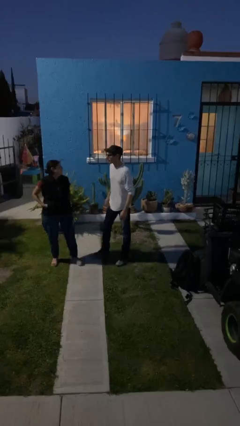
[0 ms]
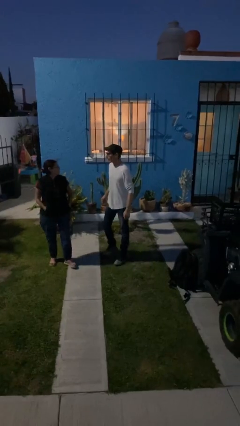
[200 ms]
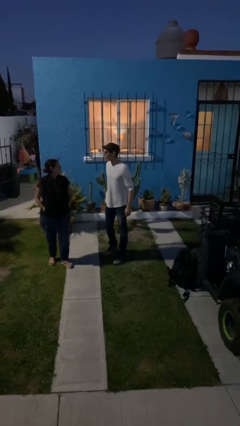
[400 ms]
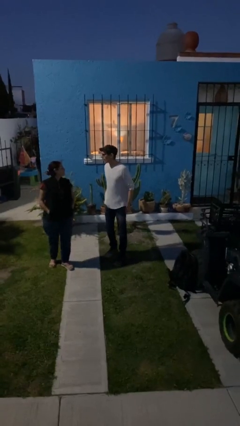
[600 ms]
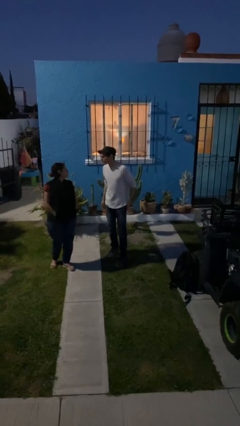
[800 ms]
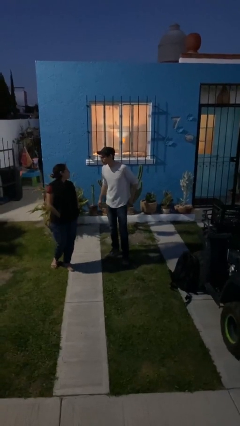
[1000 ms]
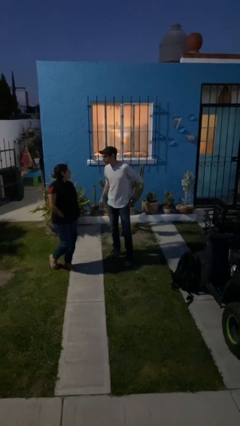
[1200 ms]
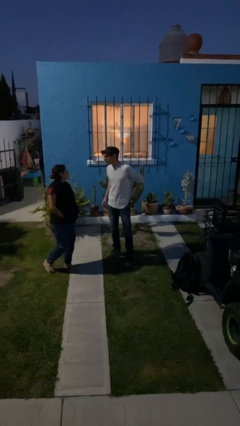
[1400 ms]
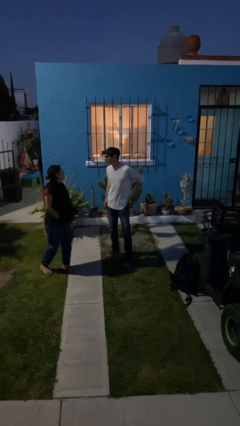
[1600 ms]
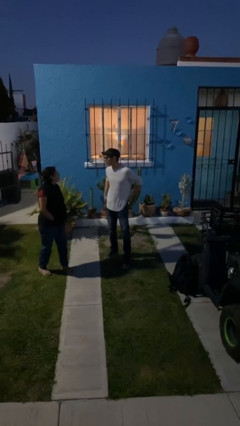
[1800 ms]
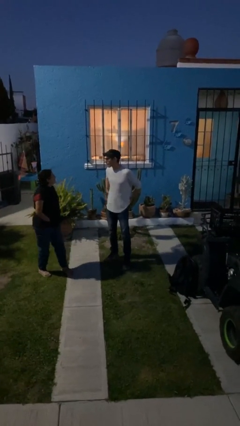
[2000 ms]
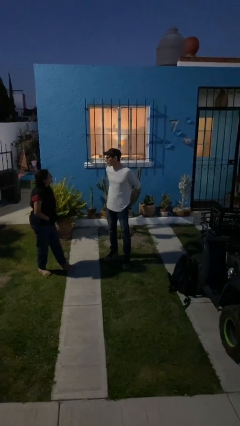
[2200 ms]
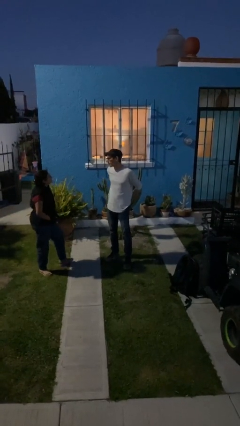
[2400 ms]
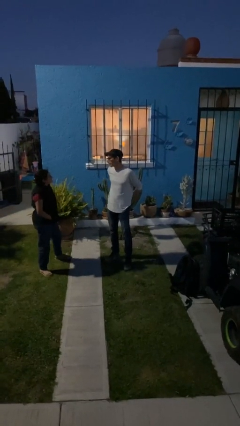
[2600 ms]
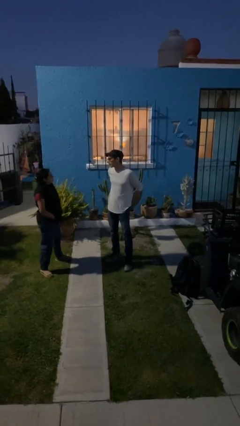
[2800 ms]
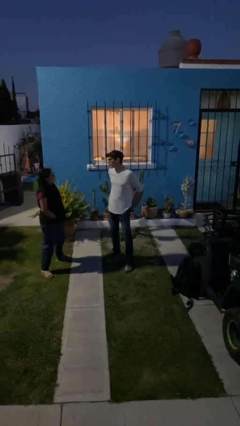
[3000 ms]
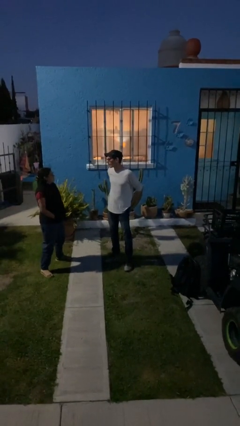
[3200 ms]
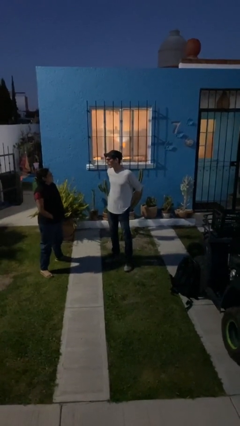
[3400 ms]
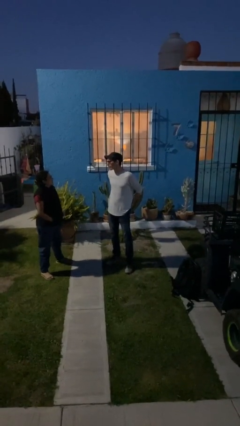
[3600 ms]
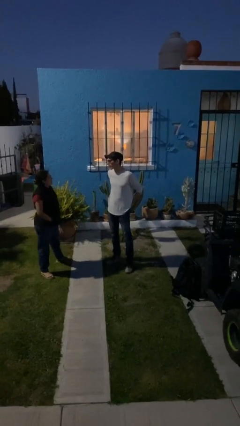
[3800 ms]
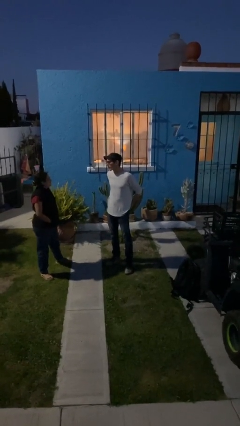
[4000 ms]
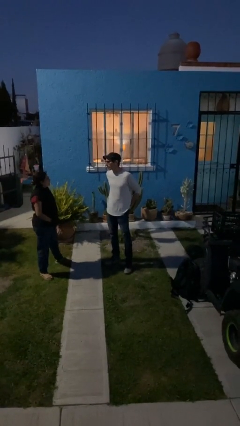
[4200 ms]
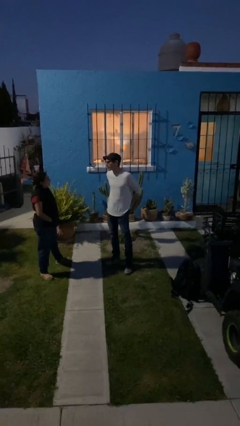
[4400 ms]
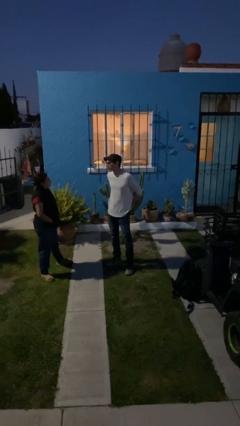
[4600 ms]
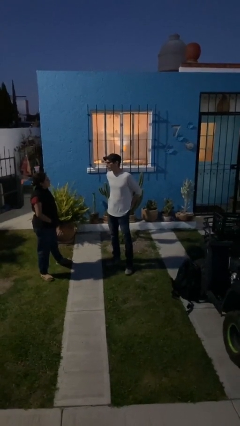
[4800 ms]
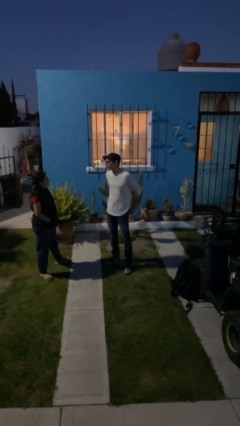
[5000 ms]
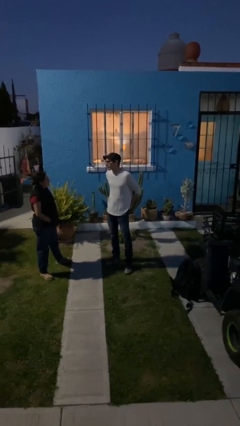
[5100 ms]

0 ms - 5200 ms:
person talks to person

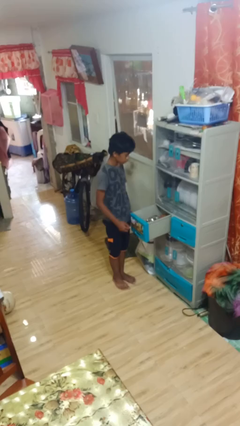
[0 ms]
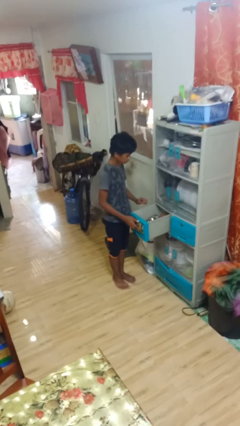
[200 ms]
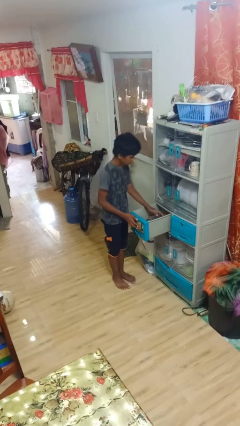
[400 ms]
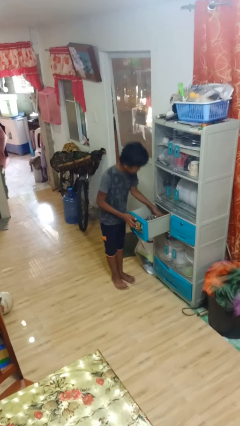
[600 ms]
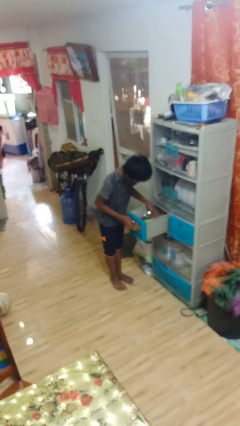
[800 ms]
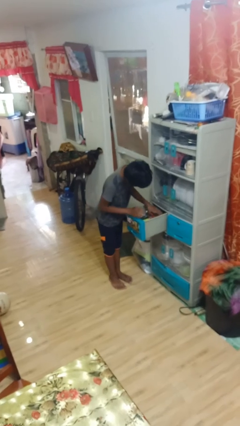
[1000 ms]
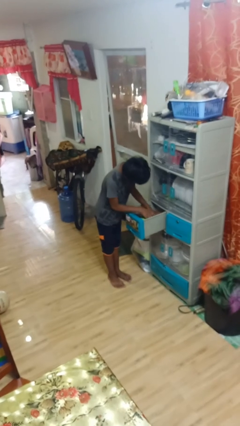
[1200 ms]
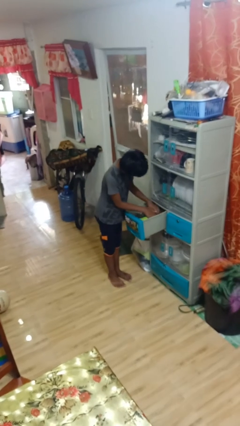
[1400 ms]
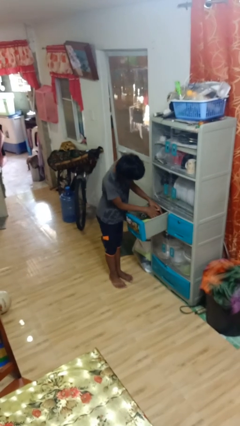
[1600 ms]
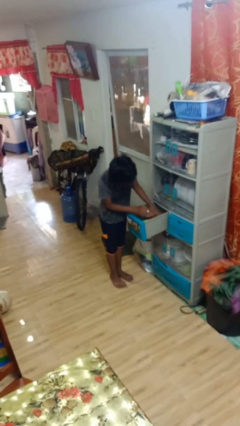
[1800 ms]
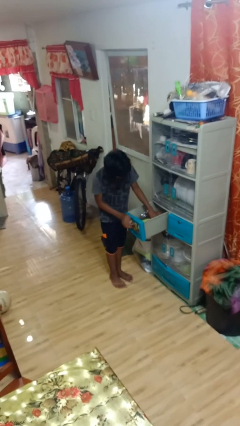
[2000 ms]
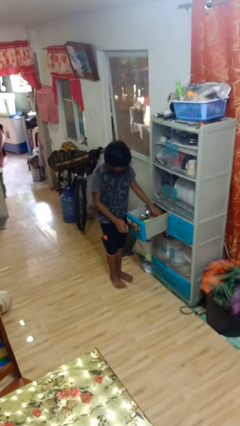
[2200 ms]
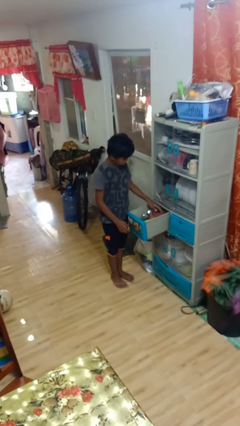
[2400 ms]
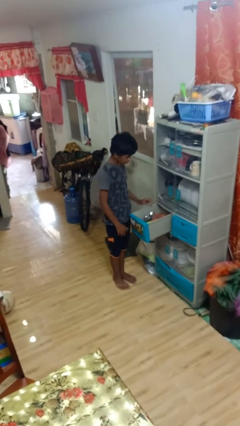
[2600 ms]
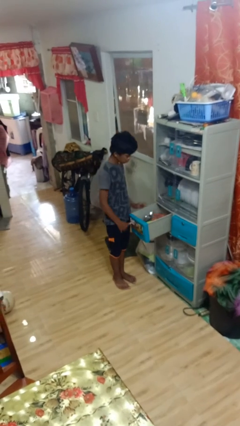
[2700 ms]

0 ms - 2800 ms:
person searches in kitchen drawer

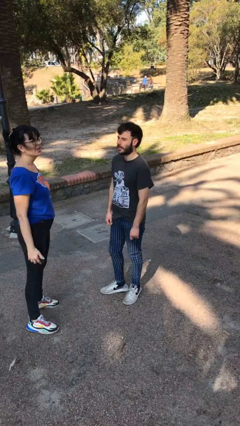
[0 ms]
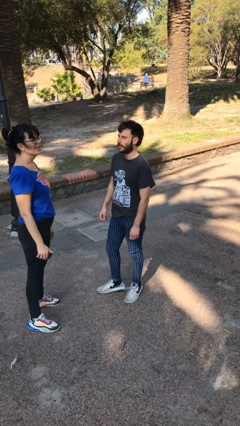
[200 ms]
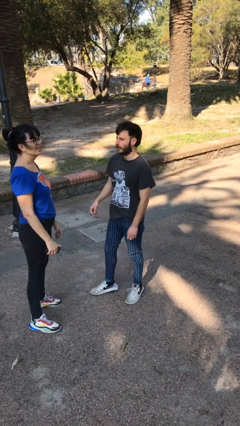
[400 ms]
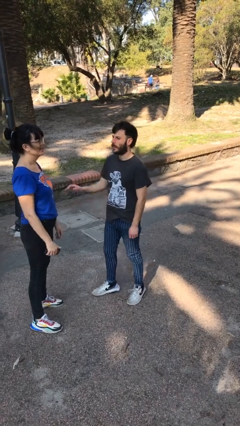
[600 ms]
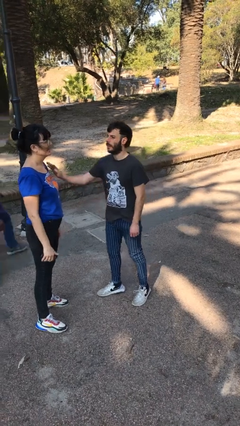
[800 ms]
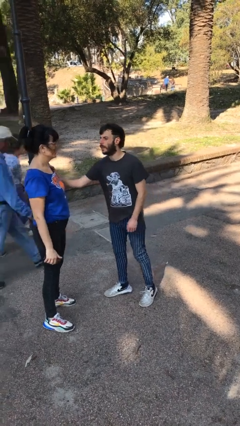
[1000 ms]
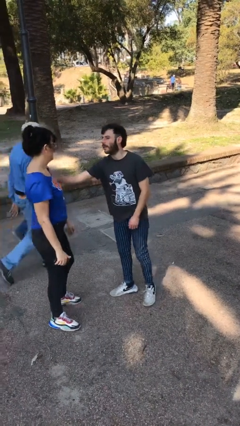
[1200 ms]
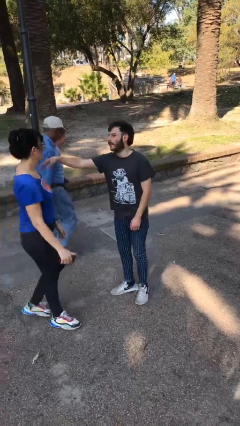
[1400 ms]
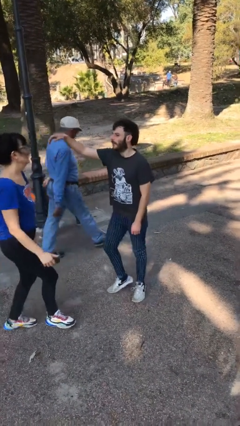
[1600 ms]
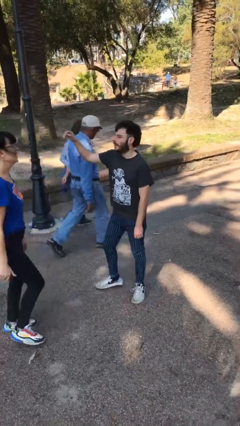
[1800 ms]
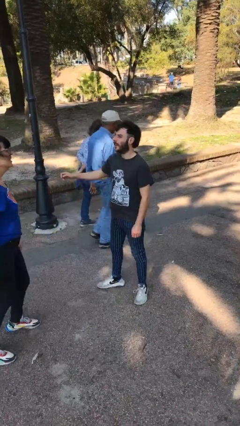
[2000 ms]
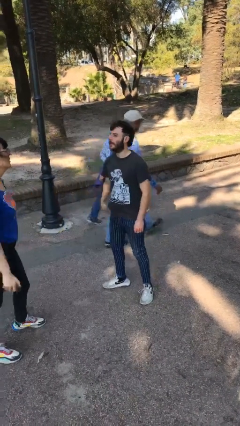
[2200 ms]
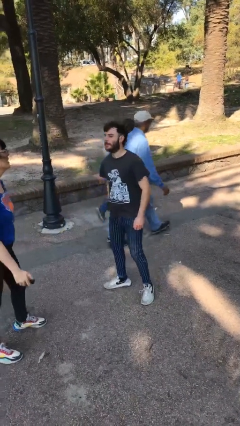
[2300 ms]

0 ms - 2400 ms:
person shoves person

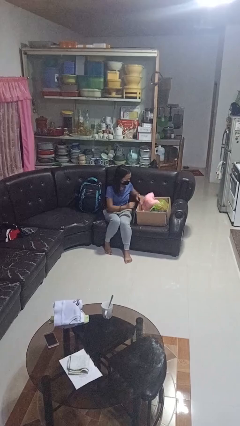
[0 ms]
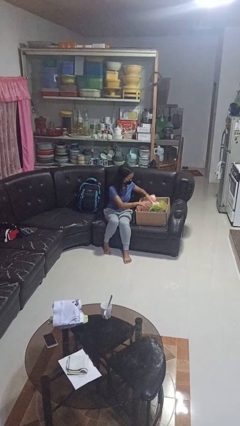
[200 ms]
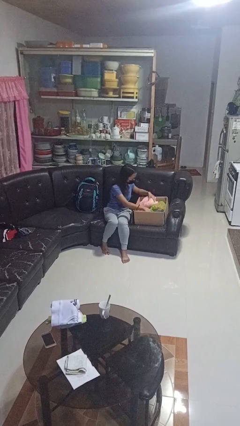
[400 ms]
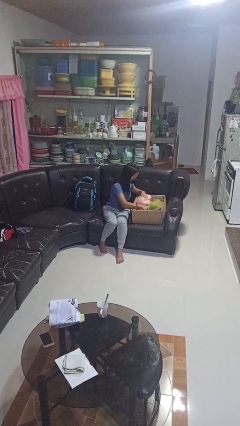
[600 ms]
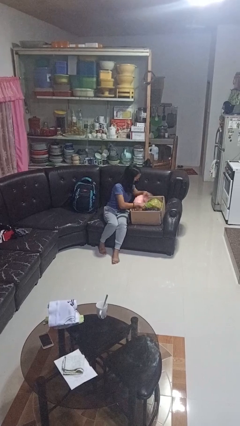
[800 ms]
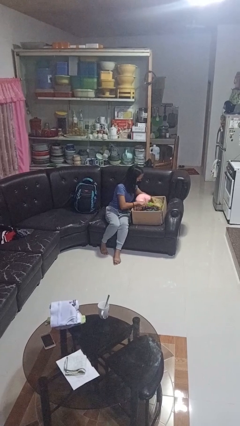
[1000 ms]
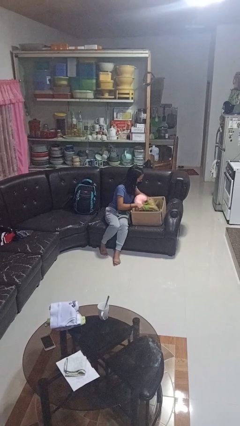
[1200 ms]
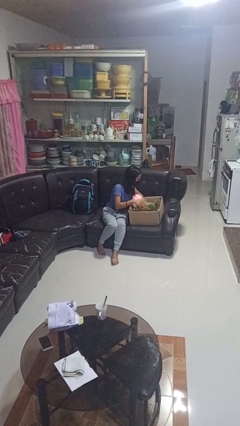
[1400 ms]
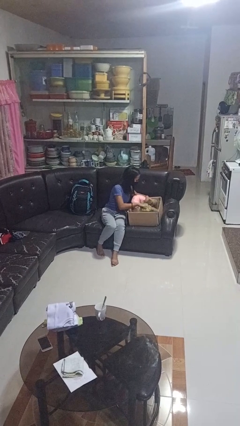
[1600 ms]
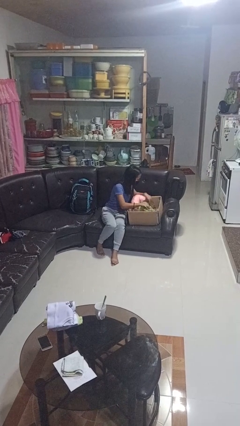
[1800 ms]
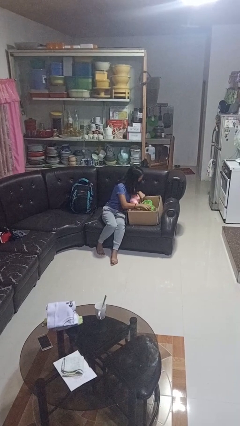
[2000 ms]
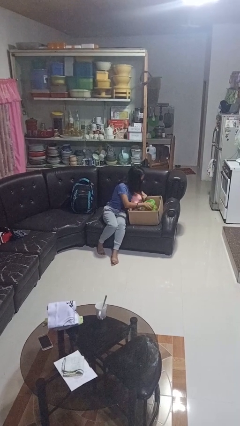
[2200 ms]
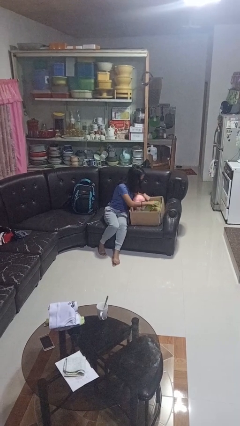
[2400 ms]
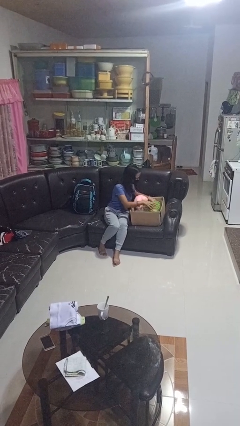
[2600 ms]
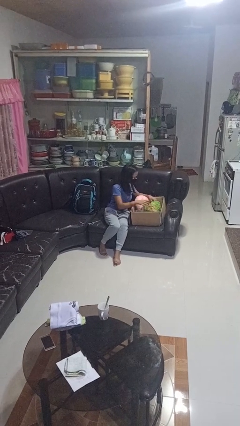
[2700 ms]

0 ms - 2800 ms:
person searches in box

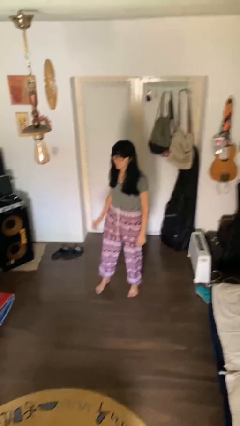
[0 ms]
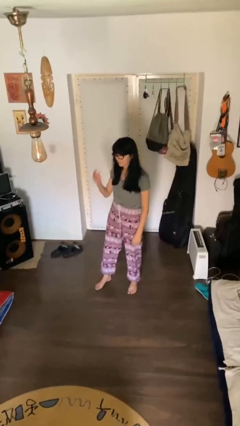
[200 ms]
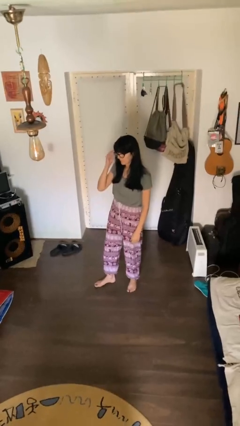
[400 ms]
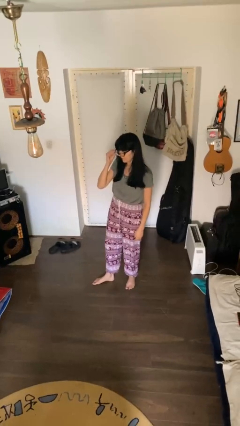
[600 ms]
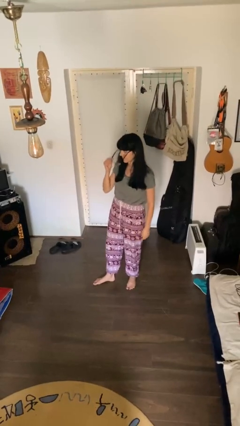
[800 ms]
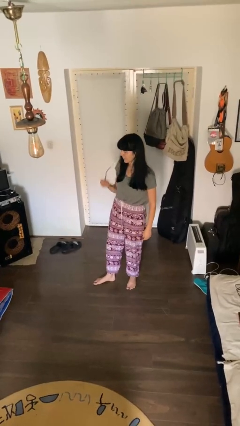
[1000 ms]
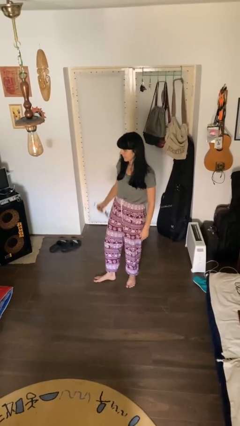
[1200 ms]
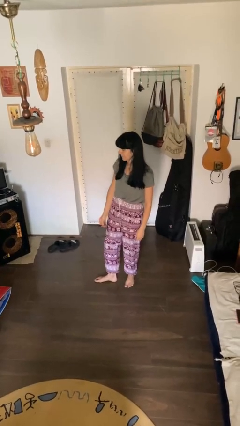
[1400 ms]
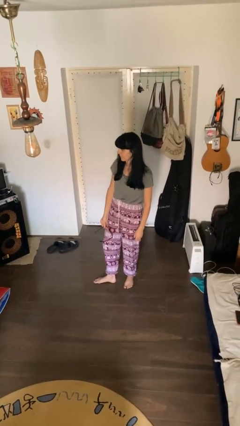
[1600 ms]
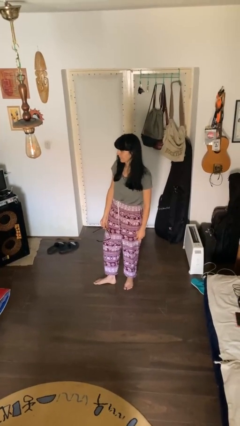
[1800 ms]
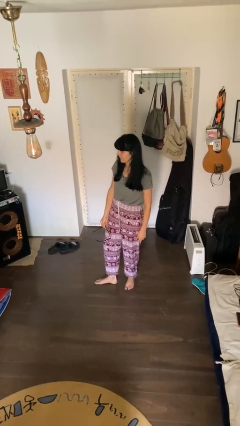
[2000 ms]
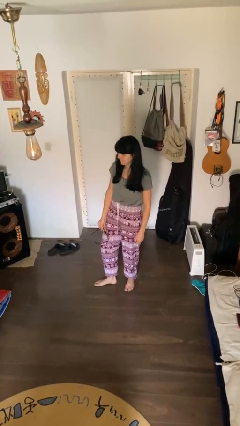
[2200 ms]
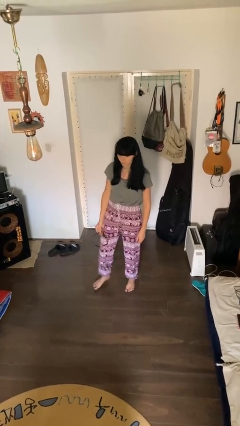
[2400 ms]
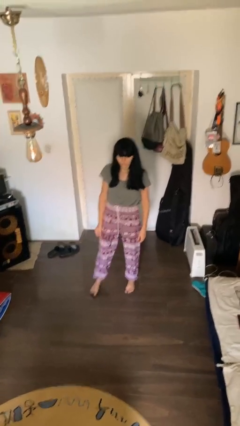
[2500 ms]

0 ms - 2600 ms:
person takes off glasses

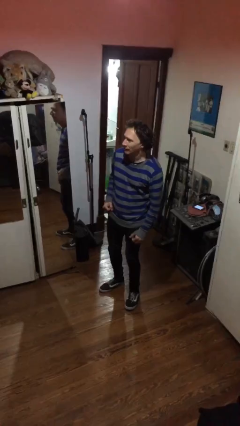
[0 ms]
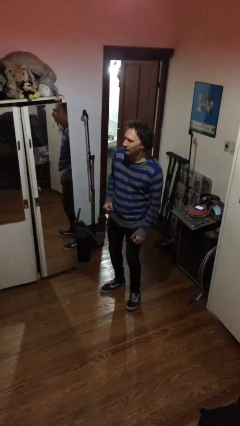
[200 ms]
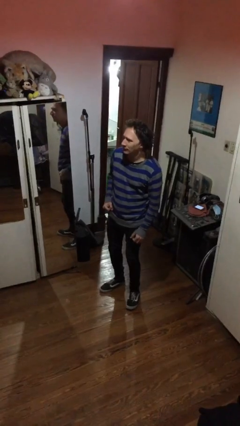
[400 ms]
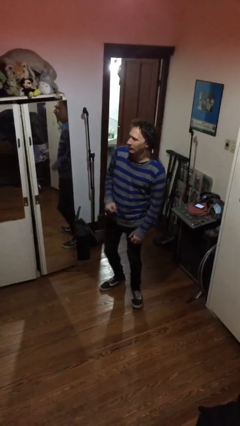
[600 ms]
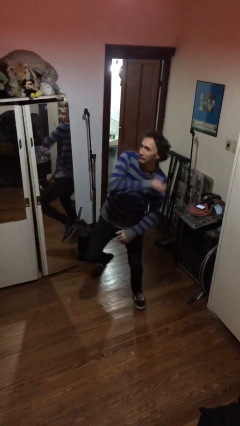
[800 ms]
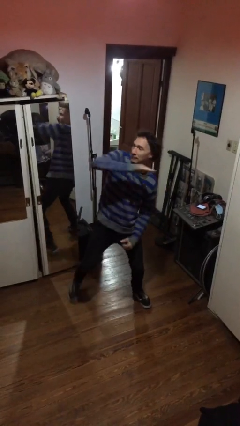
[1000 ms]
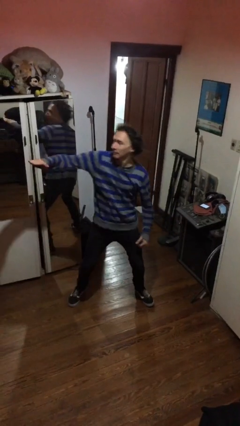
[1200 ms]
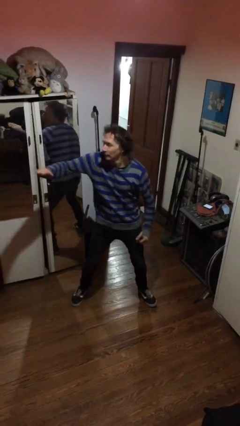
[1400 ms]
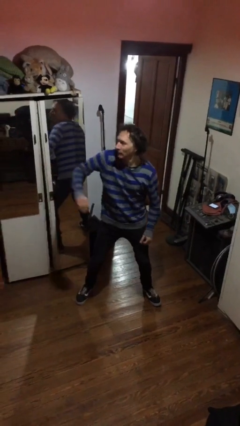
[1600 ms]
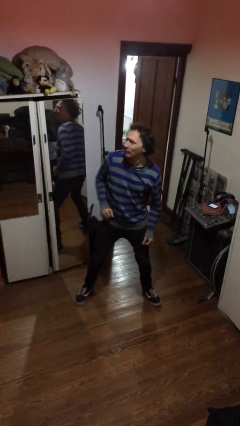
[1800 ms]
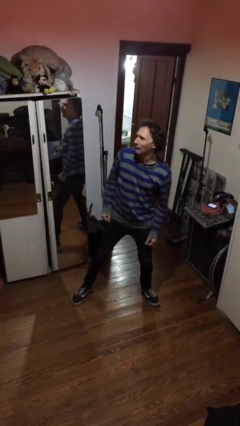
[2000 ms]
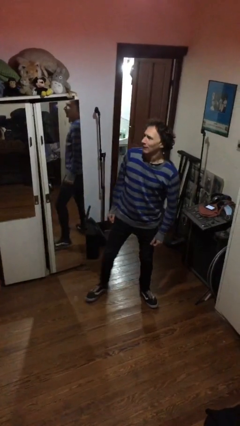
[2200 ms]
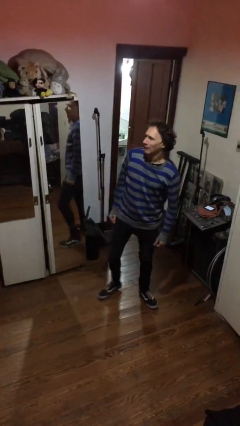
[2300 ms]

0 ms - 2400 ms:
person karate chop
